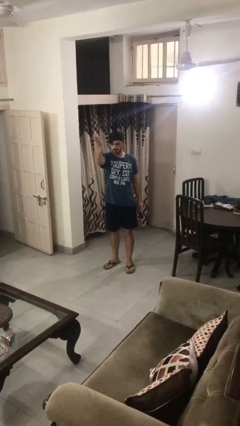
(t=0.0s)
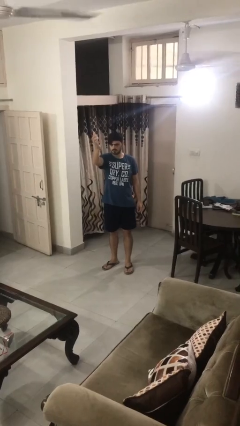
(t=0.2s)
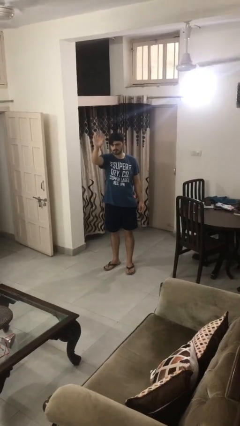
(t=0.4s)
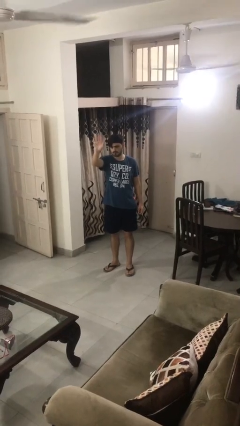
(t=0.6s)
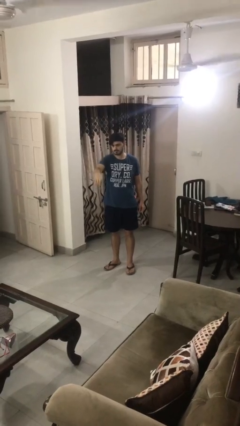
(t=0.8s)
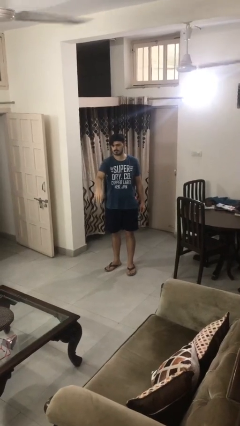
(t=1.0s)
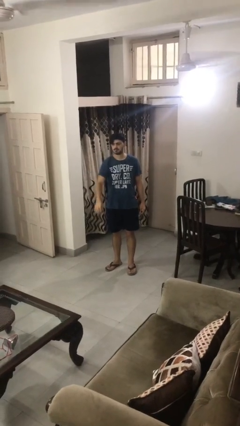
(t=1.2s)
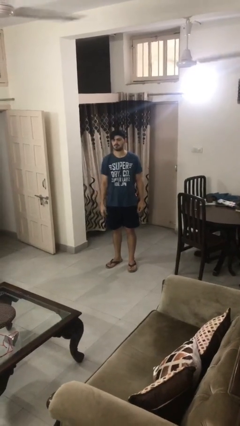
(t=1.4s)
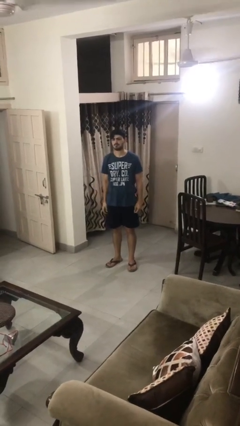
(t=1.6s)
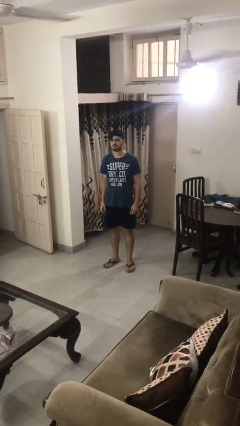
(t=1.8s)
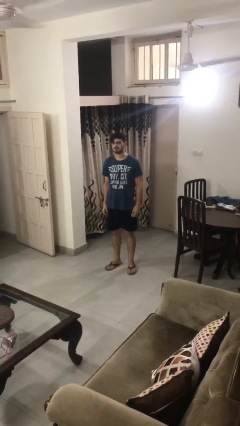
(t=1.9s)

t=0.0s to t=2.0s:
person gestures swipe down

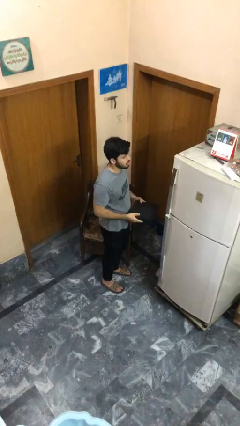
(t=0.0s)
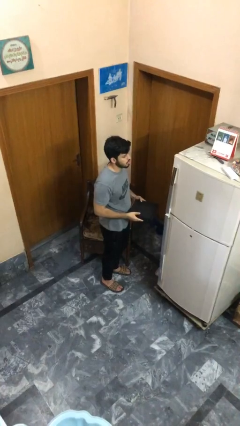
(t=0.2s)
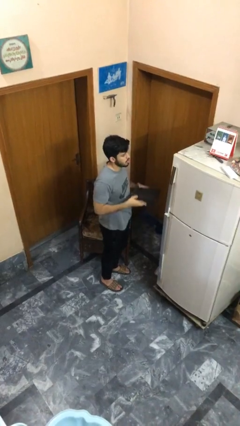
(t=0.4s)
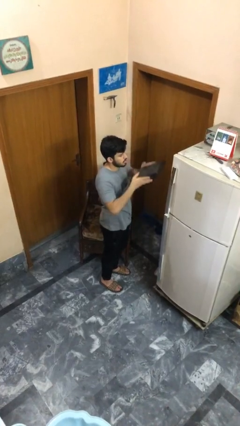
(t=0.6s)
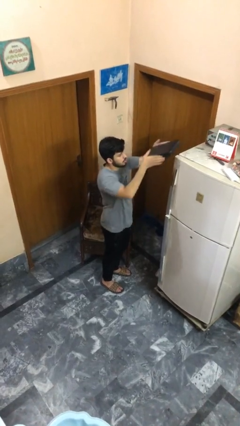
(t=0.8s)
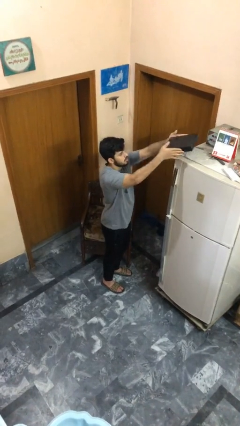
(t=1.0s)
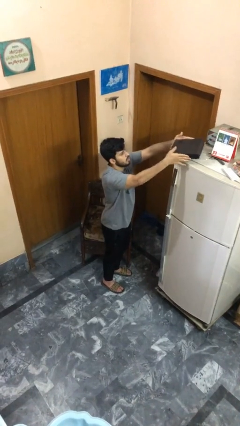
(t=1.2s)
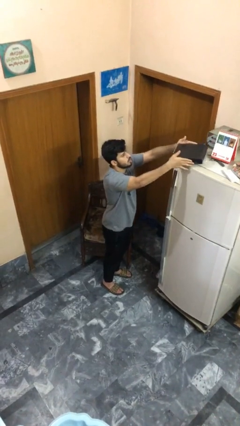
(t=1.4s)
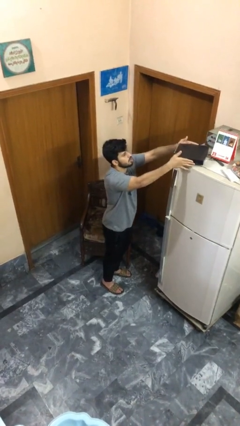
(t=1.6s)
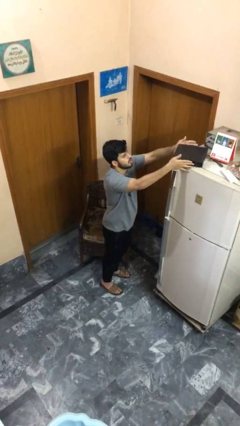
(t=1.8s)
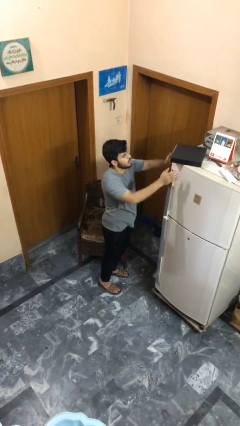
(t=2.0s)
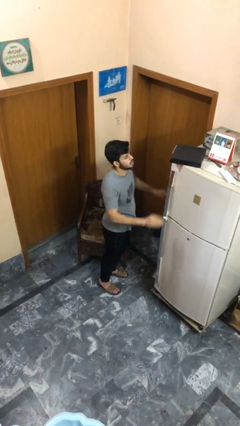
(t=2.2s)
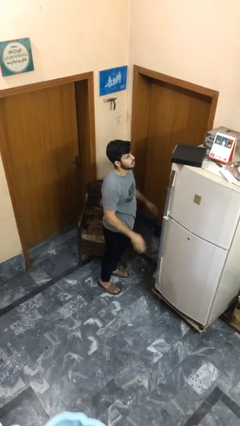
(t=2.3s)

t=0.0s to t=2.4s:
person puts down object on countertop

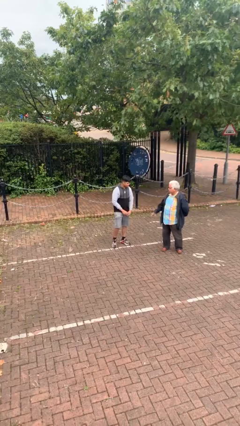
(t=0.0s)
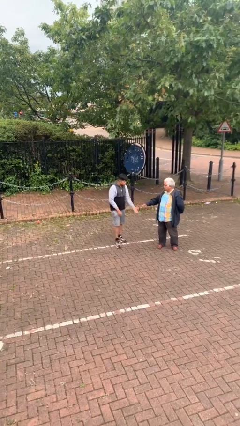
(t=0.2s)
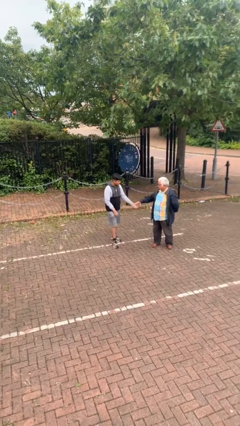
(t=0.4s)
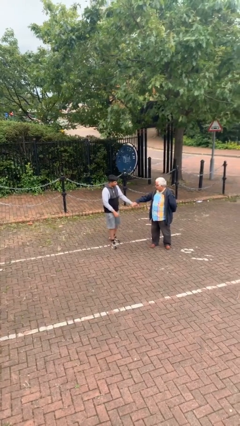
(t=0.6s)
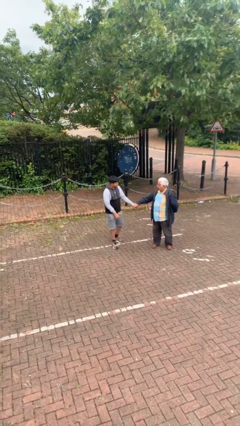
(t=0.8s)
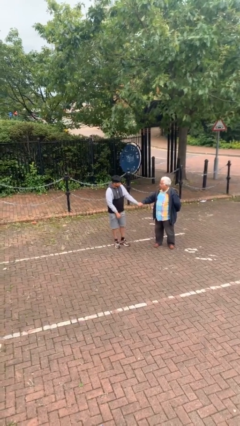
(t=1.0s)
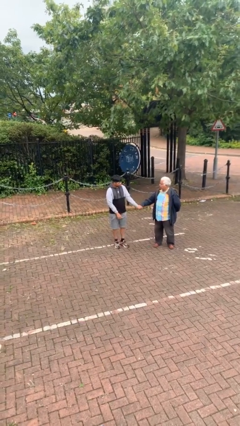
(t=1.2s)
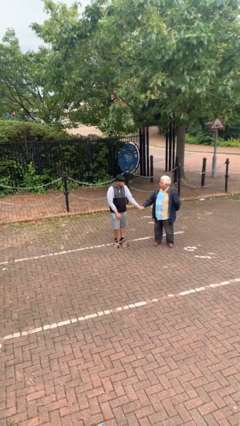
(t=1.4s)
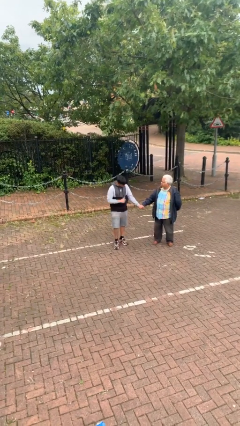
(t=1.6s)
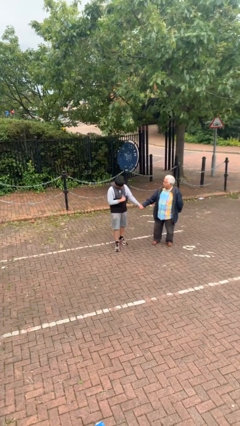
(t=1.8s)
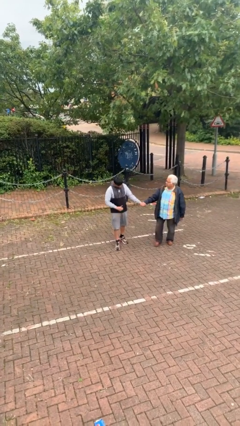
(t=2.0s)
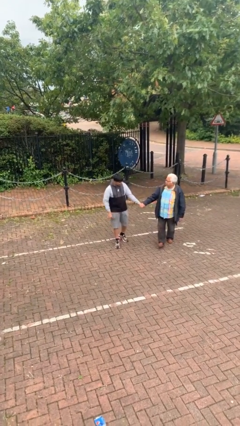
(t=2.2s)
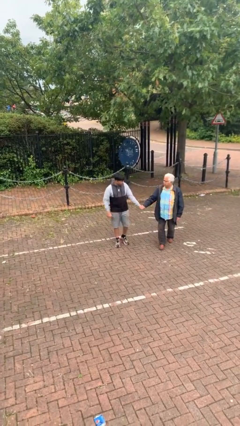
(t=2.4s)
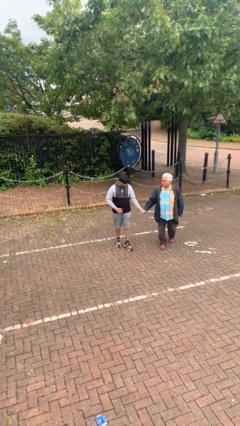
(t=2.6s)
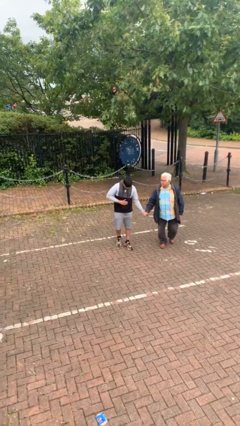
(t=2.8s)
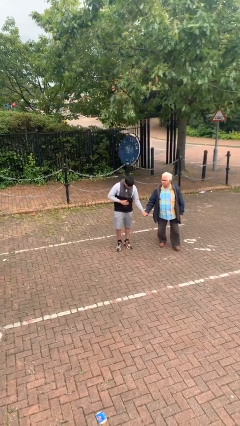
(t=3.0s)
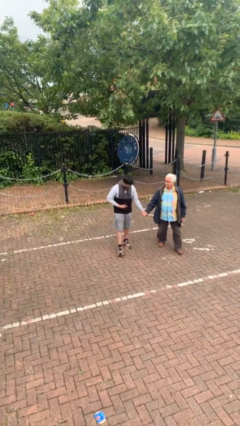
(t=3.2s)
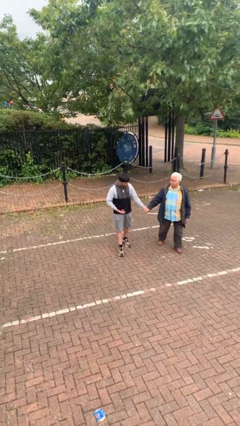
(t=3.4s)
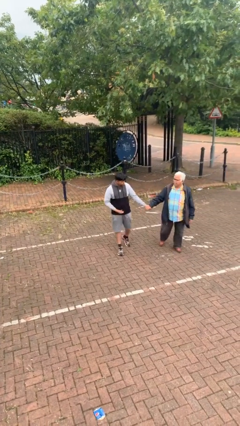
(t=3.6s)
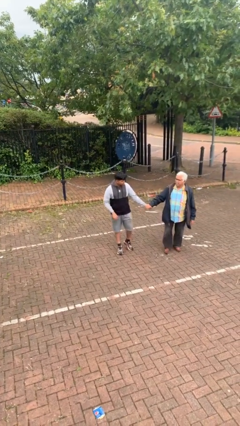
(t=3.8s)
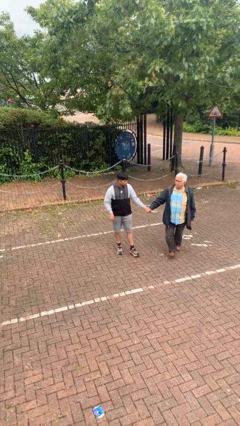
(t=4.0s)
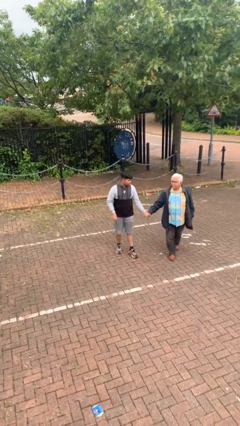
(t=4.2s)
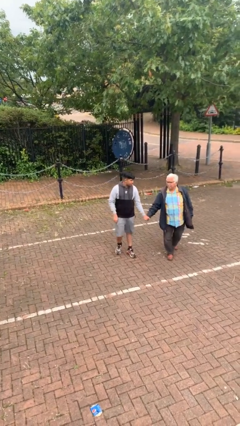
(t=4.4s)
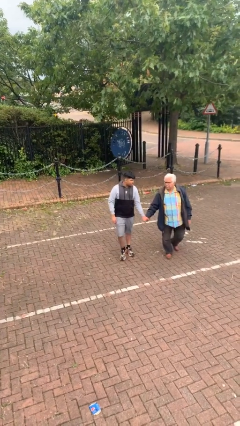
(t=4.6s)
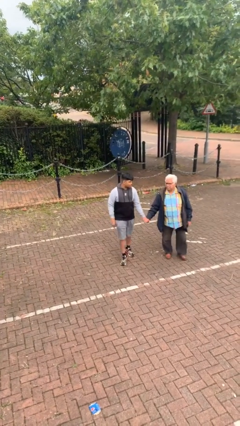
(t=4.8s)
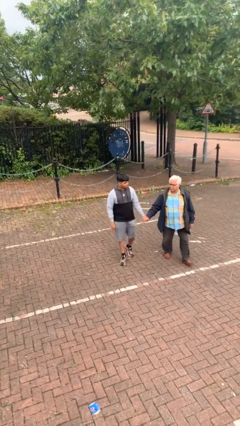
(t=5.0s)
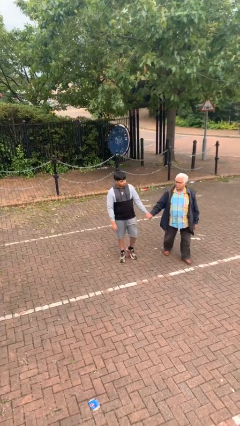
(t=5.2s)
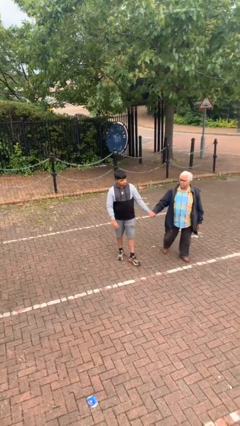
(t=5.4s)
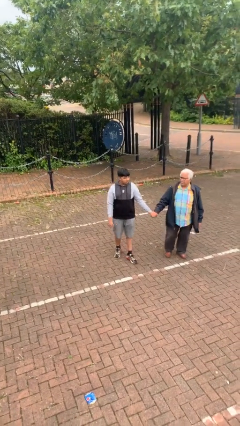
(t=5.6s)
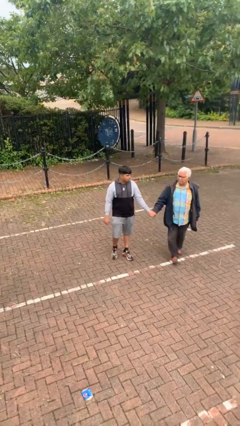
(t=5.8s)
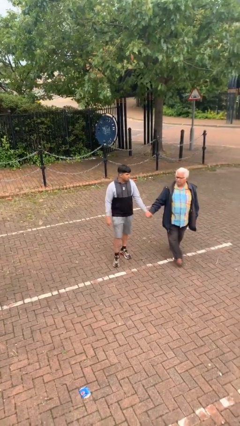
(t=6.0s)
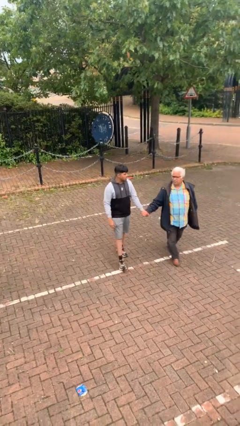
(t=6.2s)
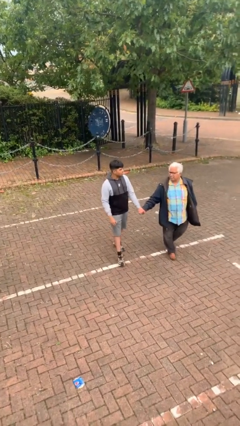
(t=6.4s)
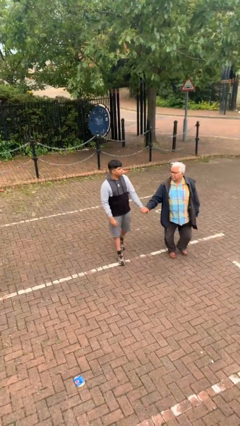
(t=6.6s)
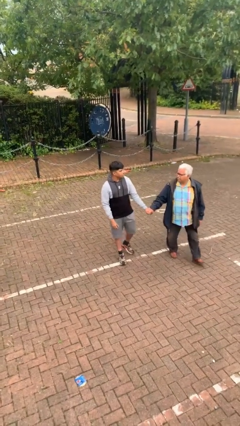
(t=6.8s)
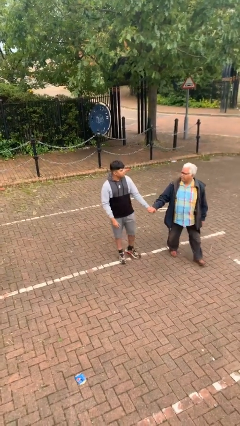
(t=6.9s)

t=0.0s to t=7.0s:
person holds hand

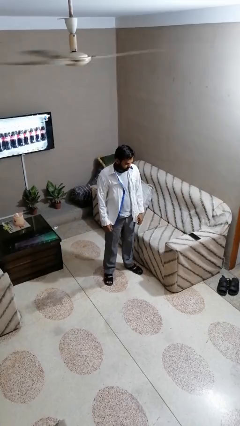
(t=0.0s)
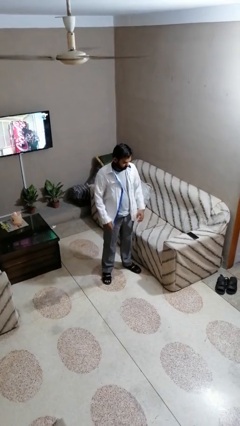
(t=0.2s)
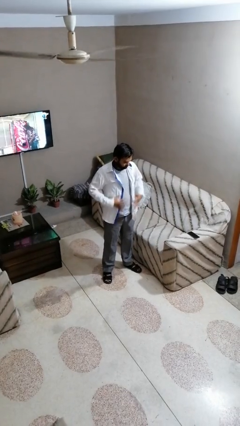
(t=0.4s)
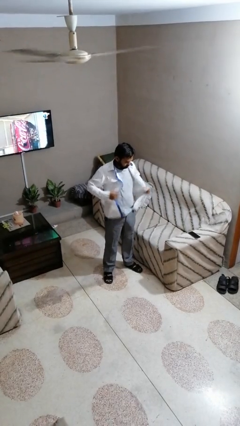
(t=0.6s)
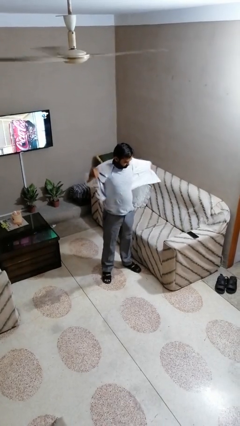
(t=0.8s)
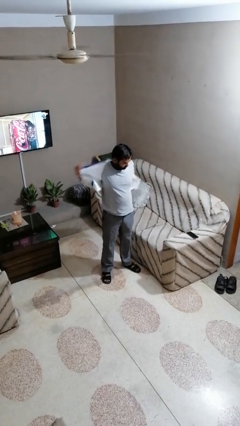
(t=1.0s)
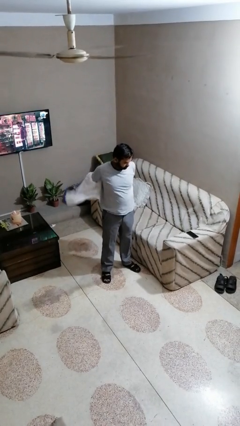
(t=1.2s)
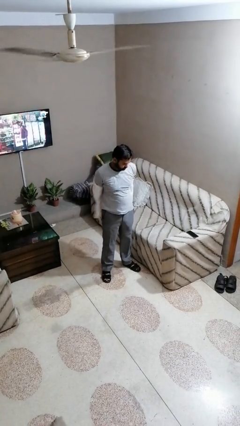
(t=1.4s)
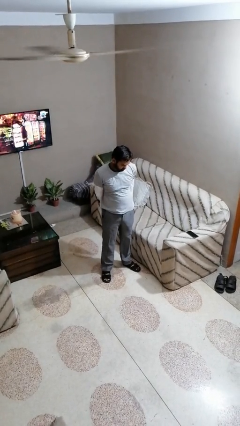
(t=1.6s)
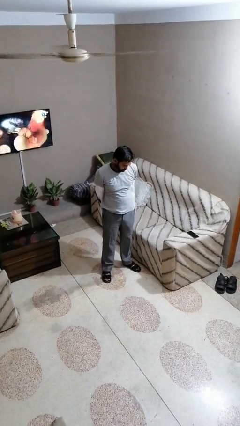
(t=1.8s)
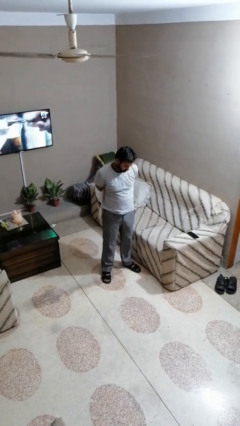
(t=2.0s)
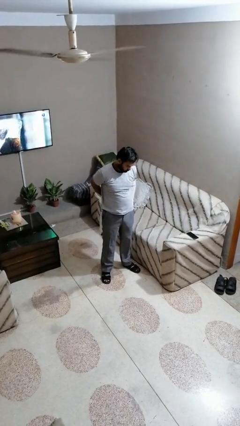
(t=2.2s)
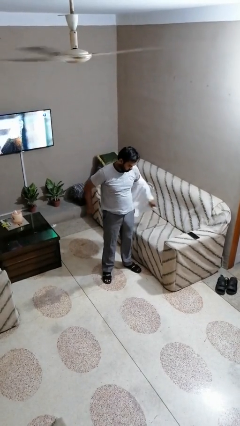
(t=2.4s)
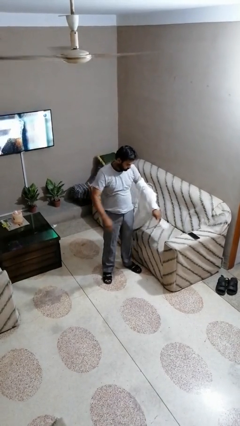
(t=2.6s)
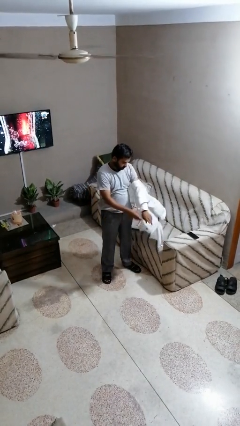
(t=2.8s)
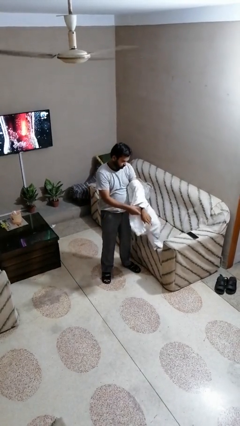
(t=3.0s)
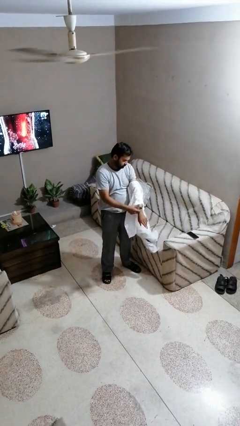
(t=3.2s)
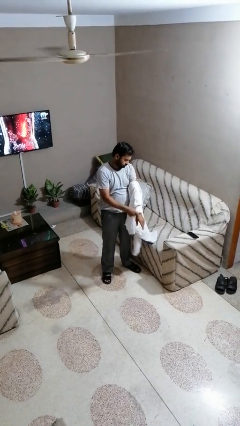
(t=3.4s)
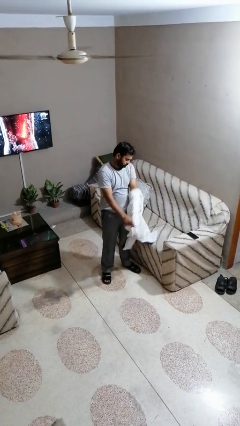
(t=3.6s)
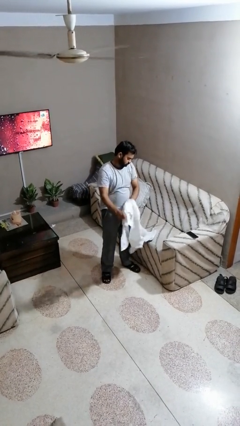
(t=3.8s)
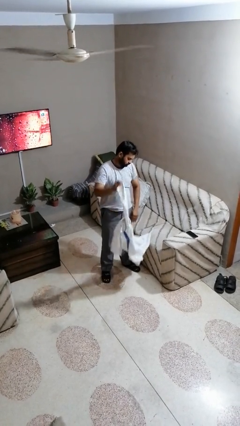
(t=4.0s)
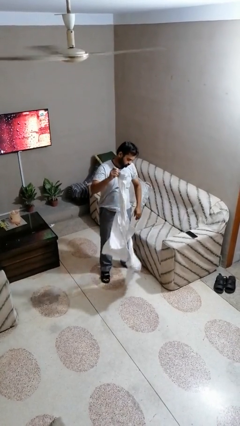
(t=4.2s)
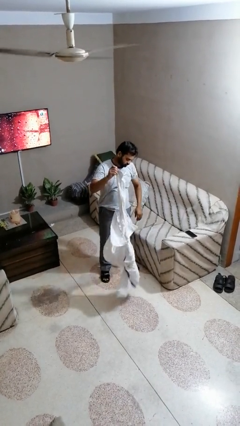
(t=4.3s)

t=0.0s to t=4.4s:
person takes off shirt

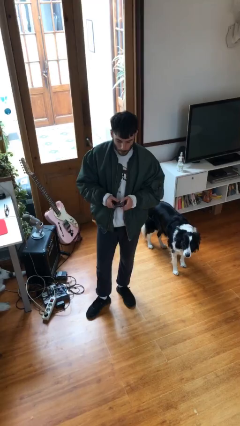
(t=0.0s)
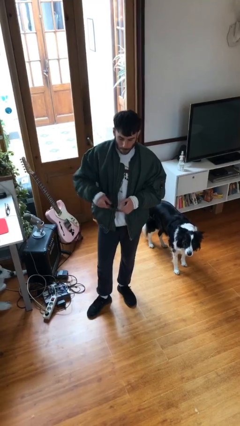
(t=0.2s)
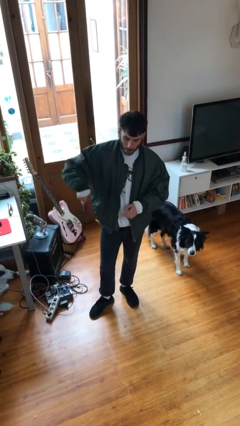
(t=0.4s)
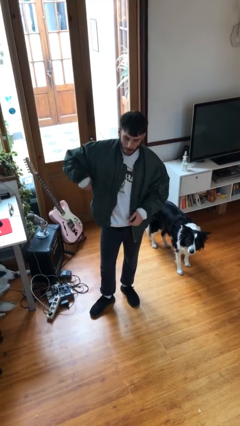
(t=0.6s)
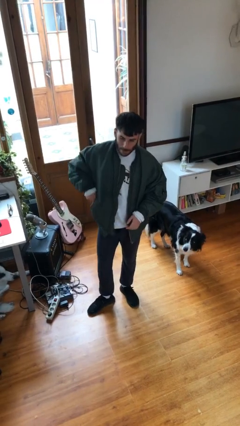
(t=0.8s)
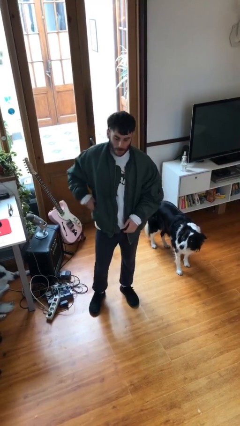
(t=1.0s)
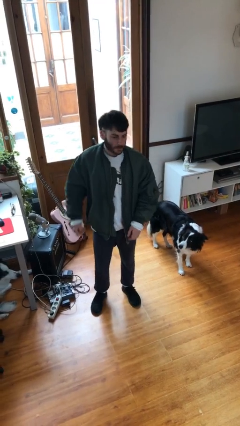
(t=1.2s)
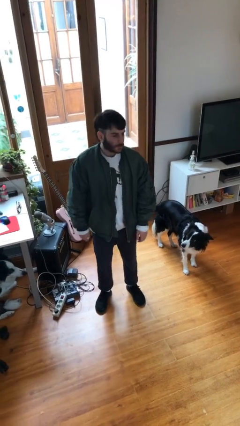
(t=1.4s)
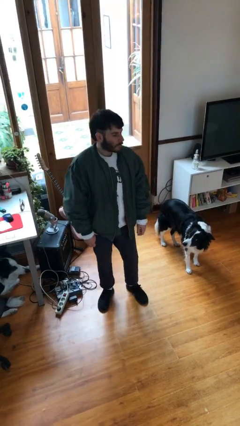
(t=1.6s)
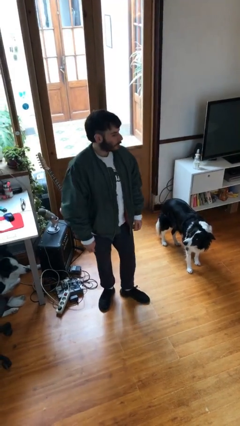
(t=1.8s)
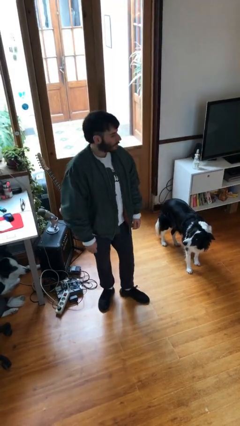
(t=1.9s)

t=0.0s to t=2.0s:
person puts phone into pocket
